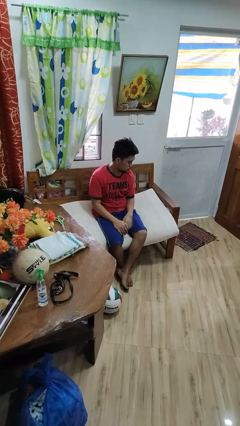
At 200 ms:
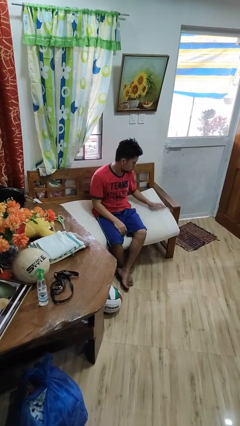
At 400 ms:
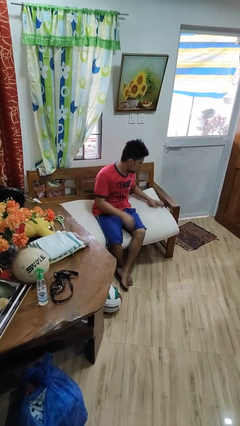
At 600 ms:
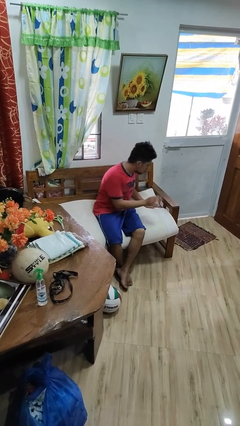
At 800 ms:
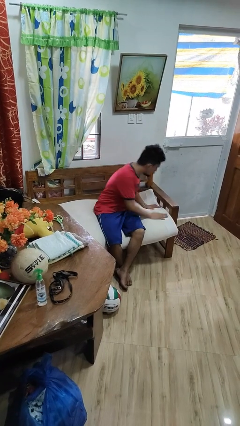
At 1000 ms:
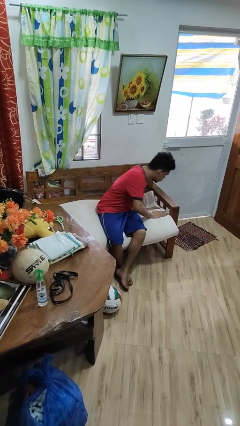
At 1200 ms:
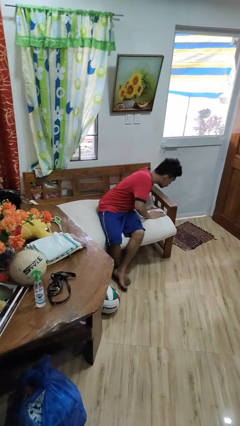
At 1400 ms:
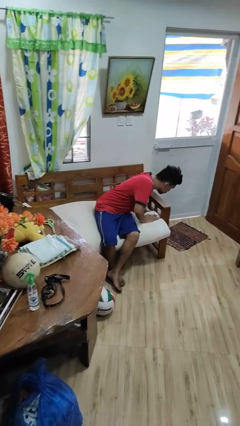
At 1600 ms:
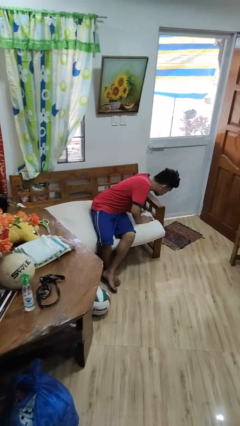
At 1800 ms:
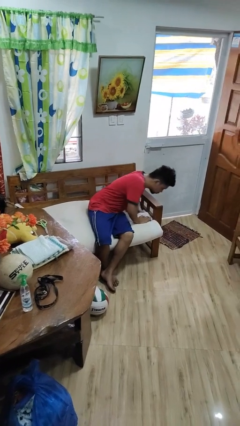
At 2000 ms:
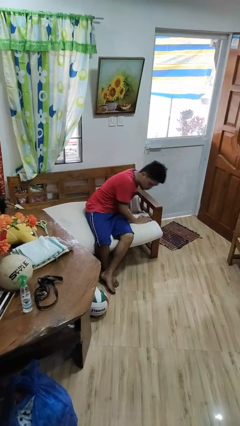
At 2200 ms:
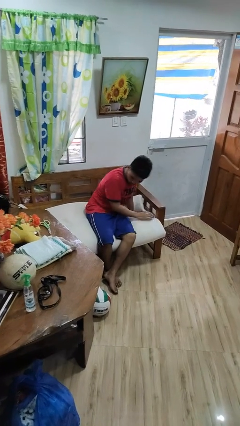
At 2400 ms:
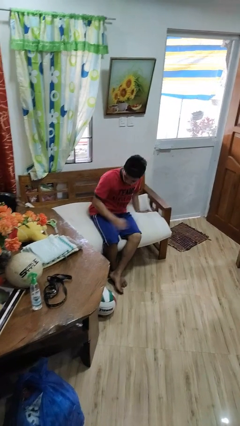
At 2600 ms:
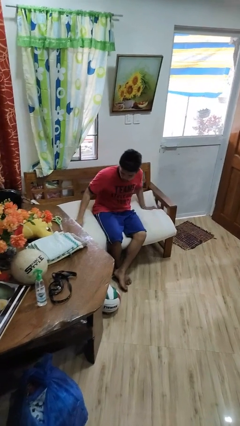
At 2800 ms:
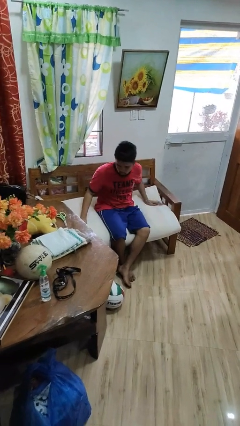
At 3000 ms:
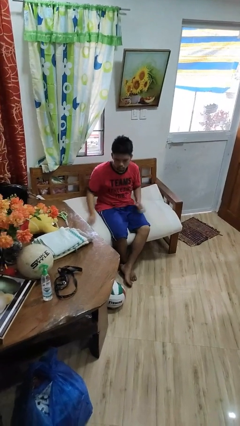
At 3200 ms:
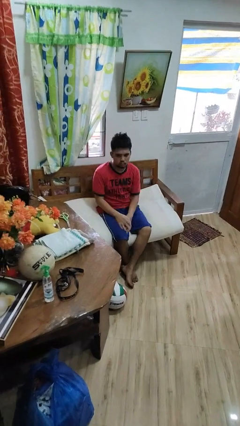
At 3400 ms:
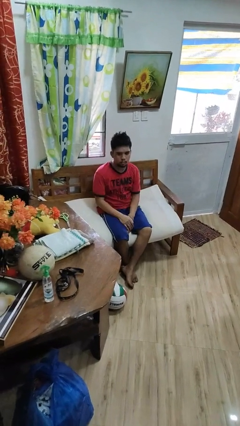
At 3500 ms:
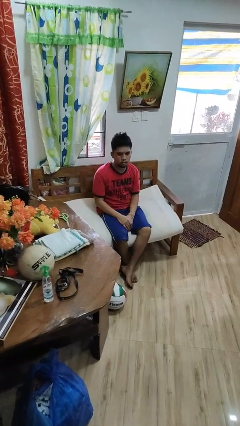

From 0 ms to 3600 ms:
person searches in couch

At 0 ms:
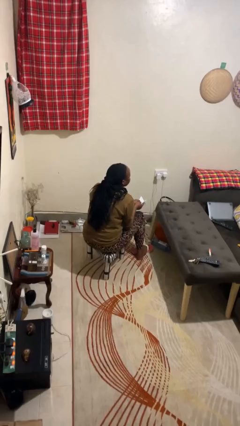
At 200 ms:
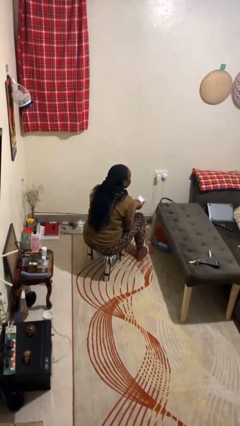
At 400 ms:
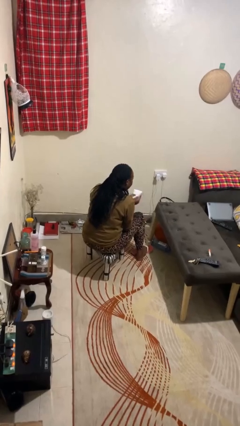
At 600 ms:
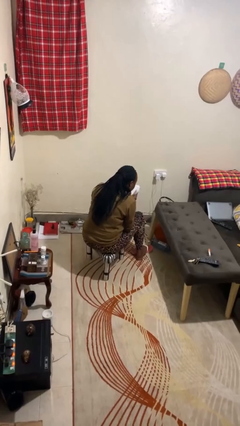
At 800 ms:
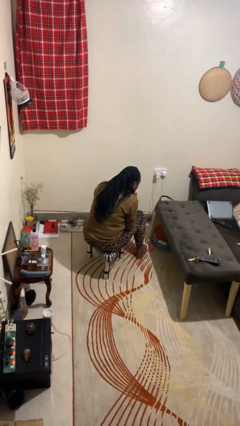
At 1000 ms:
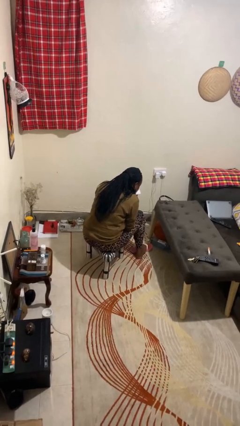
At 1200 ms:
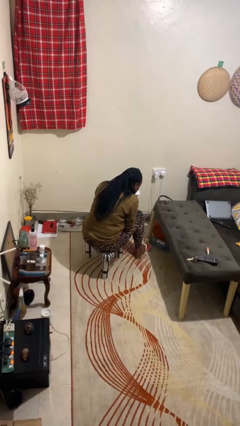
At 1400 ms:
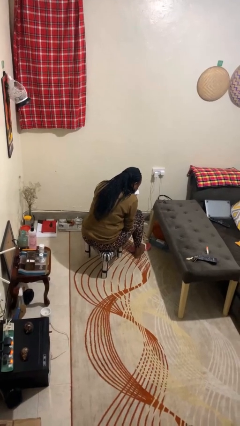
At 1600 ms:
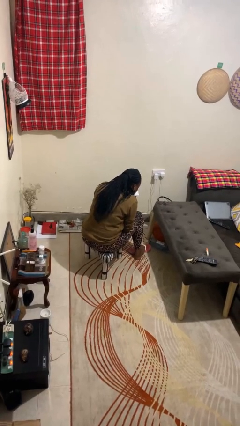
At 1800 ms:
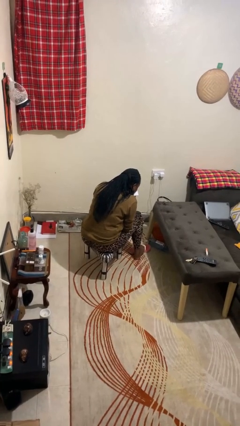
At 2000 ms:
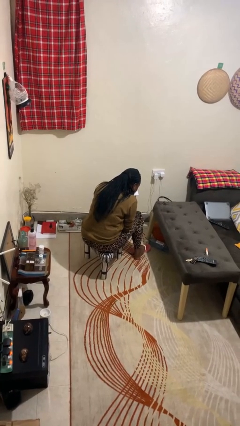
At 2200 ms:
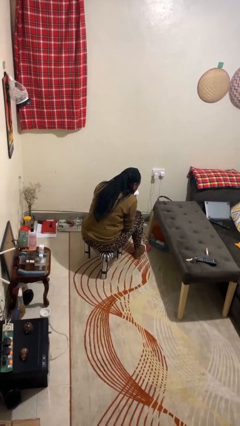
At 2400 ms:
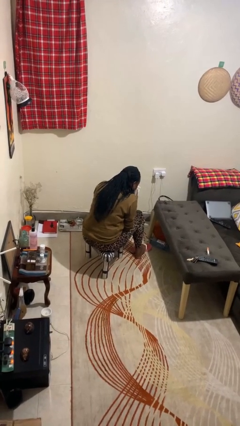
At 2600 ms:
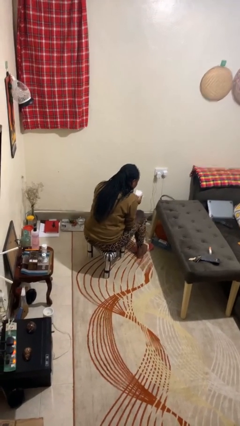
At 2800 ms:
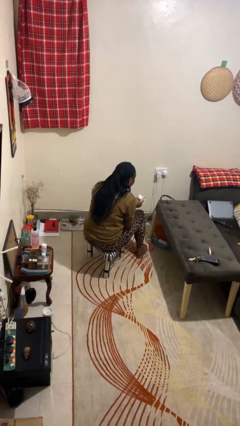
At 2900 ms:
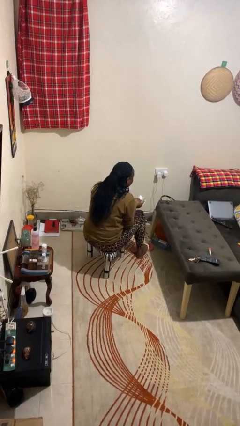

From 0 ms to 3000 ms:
person blows nose

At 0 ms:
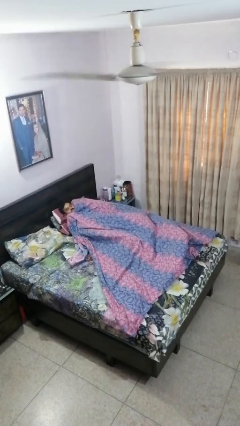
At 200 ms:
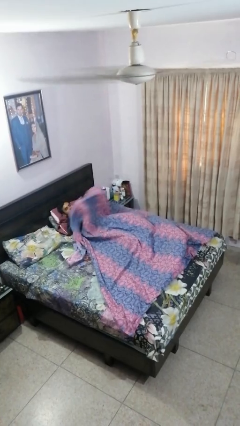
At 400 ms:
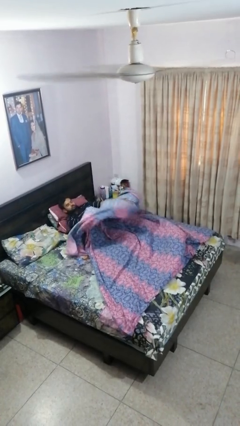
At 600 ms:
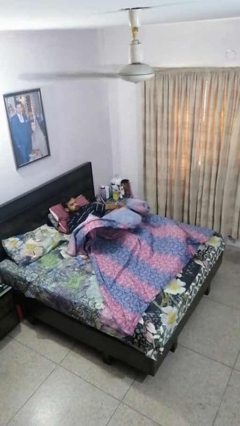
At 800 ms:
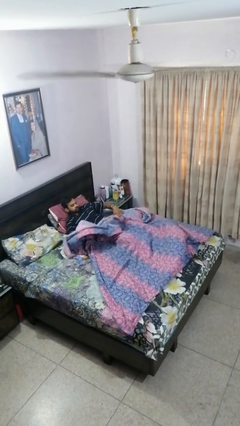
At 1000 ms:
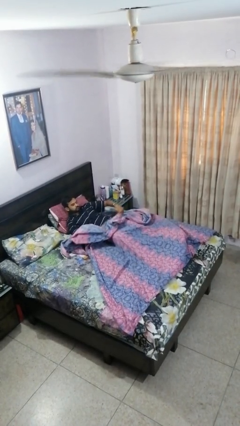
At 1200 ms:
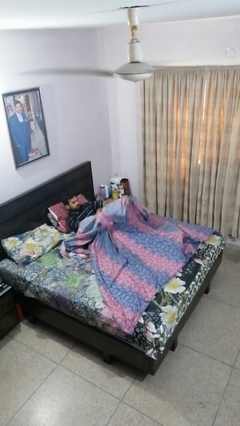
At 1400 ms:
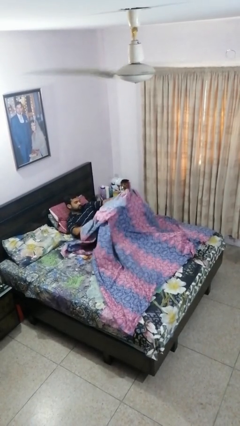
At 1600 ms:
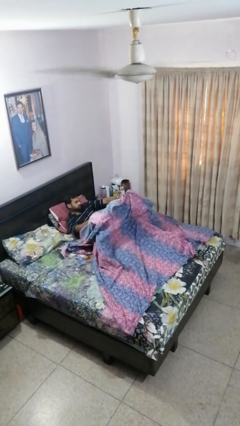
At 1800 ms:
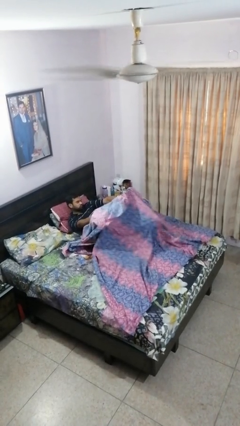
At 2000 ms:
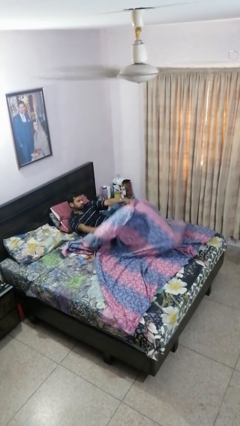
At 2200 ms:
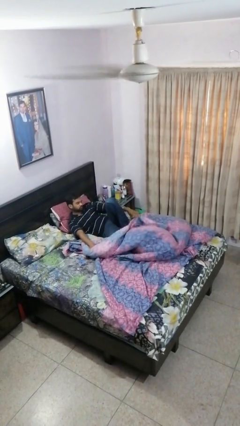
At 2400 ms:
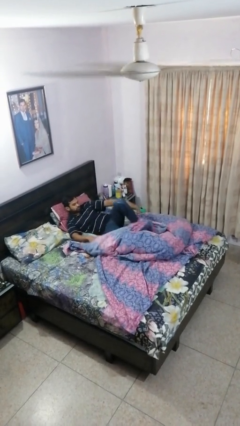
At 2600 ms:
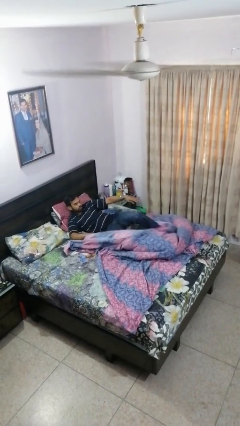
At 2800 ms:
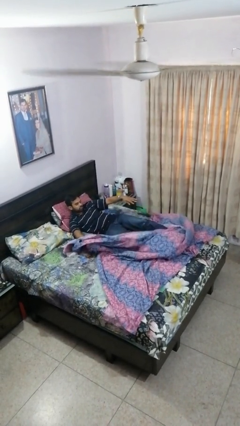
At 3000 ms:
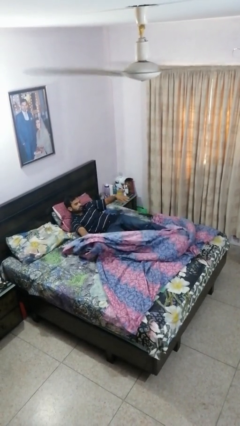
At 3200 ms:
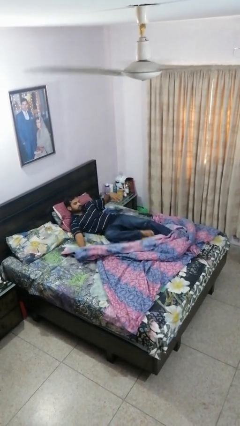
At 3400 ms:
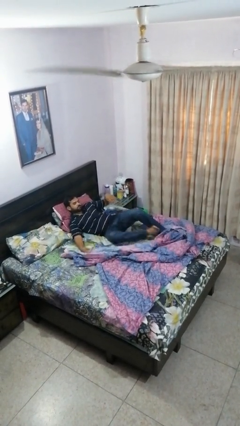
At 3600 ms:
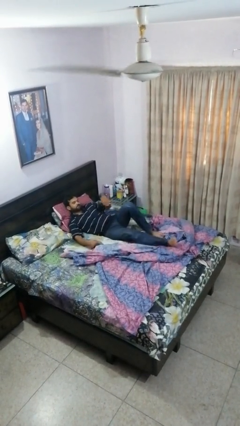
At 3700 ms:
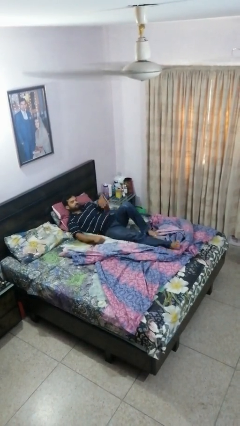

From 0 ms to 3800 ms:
person uncovers with bedsheets

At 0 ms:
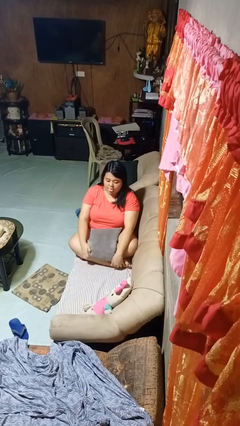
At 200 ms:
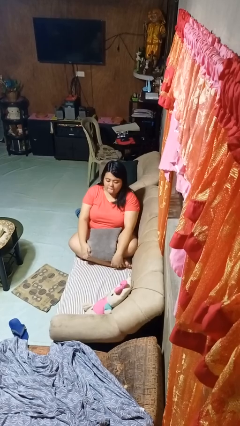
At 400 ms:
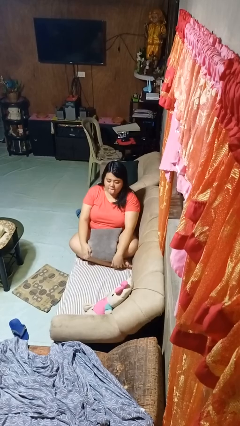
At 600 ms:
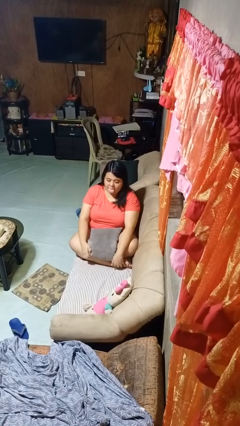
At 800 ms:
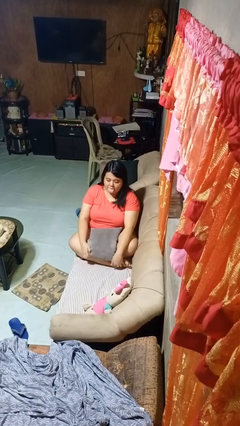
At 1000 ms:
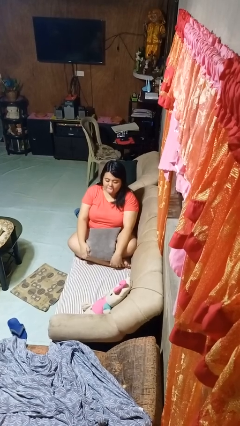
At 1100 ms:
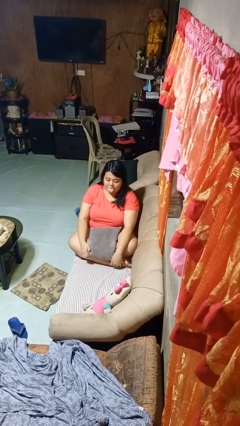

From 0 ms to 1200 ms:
person sticks out tongue

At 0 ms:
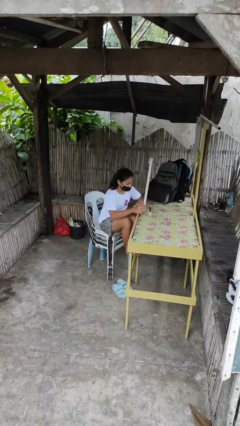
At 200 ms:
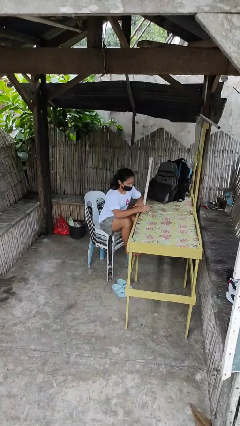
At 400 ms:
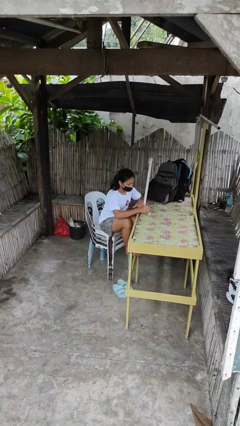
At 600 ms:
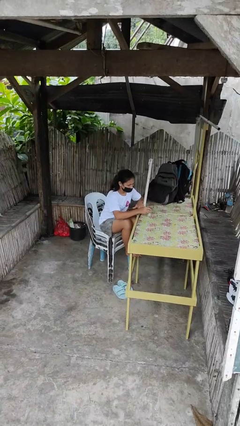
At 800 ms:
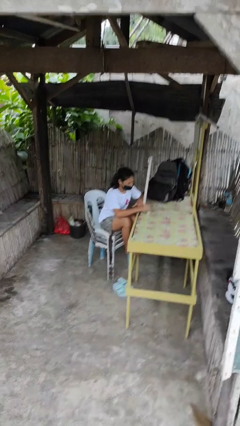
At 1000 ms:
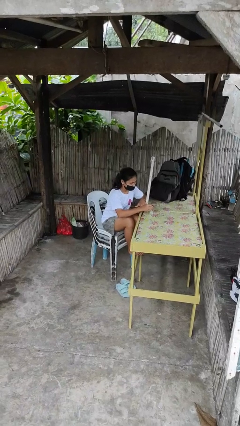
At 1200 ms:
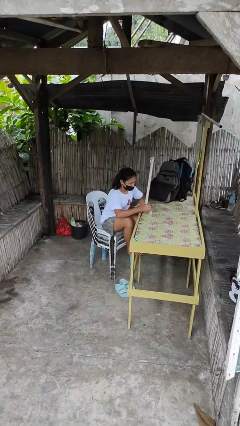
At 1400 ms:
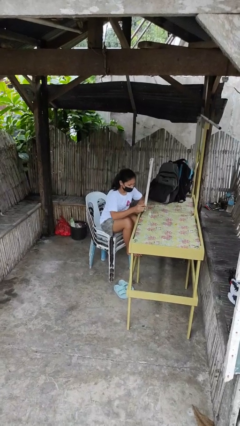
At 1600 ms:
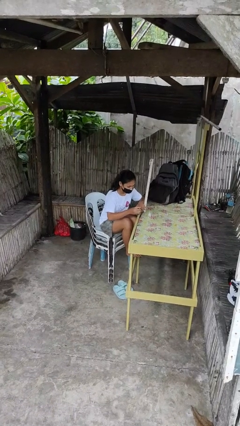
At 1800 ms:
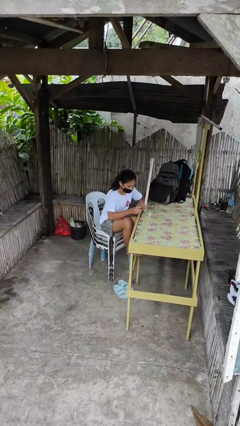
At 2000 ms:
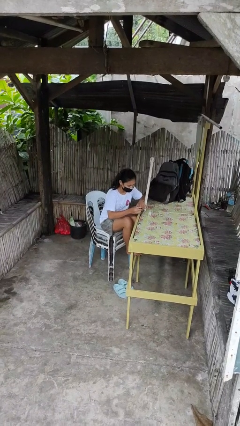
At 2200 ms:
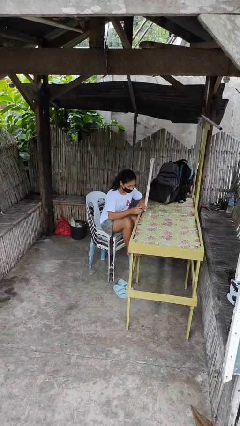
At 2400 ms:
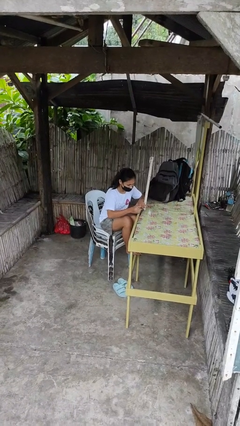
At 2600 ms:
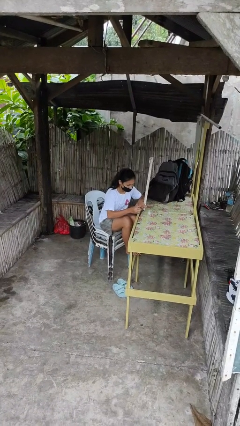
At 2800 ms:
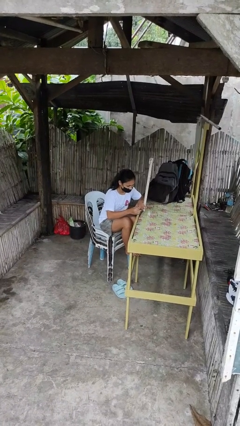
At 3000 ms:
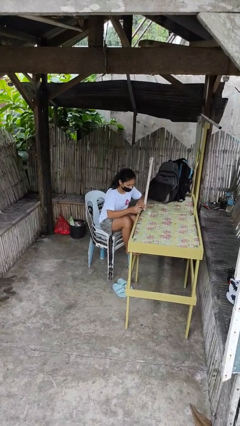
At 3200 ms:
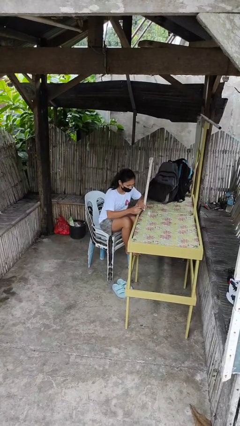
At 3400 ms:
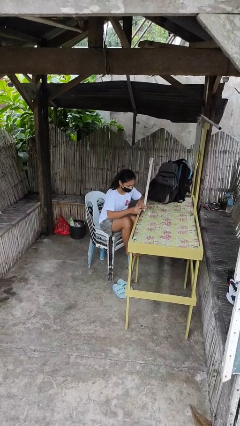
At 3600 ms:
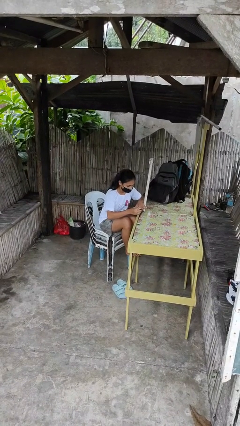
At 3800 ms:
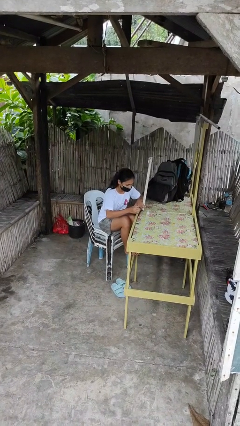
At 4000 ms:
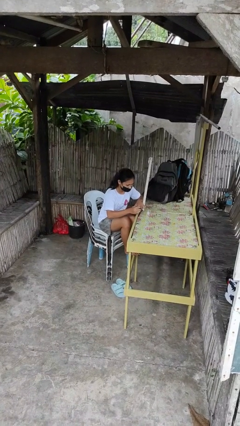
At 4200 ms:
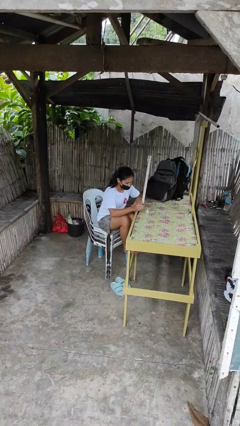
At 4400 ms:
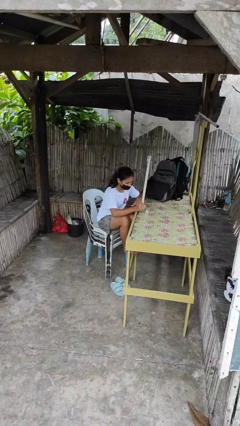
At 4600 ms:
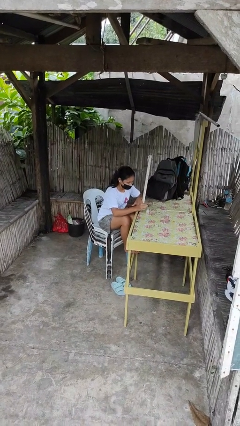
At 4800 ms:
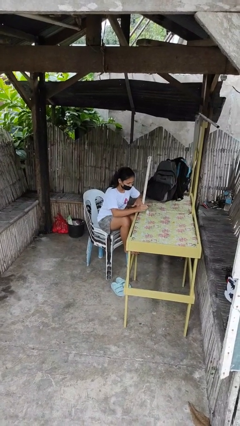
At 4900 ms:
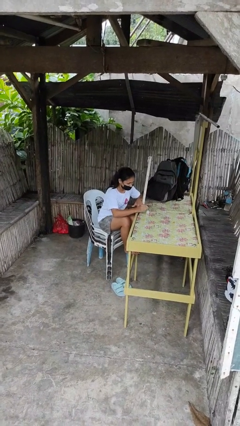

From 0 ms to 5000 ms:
person paints fingernails

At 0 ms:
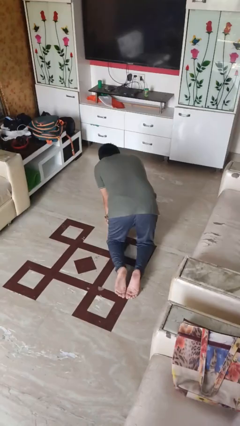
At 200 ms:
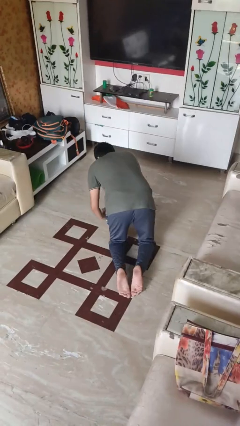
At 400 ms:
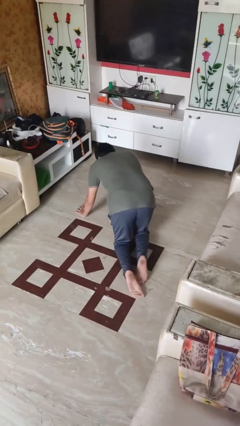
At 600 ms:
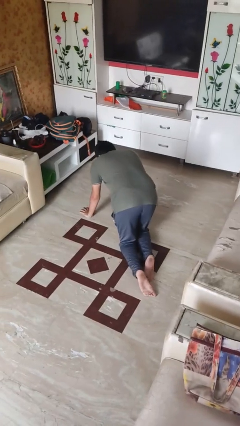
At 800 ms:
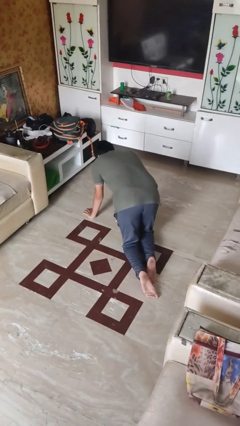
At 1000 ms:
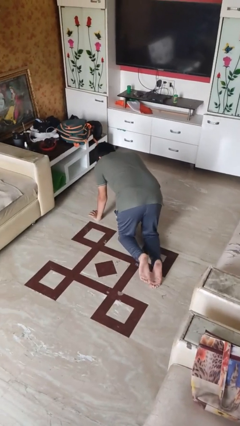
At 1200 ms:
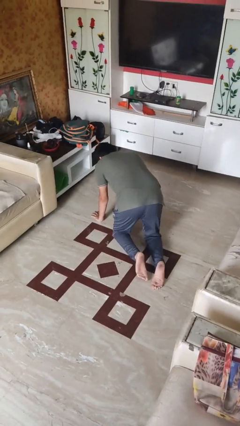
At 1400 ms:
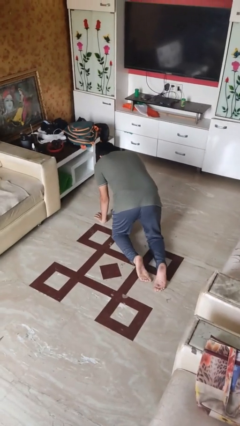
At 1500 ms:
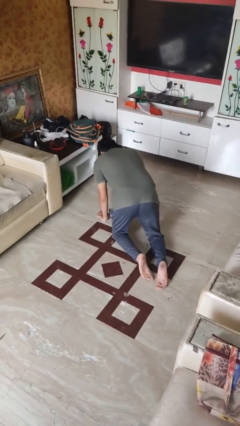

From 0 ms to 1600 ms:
person crawls
